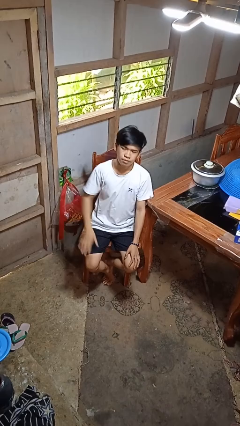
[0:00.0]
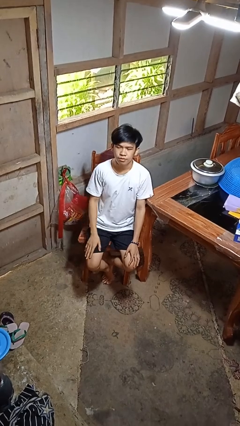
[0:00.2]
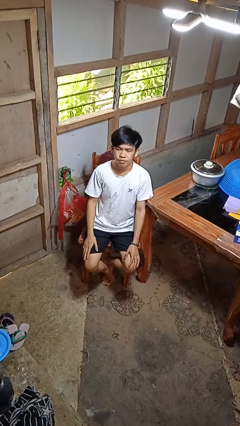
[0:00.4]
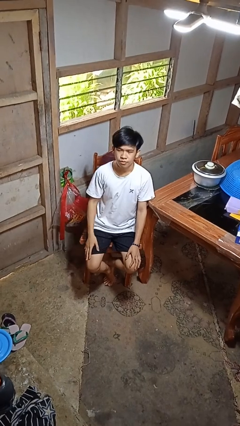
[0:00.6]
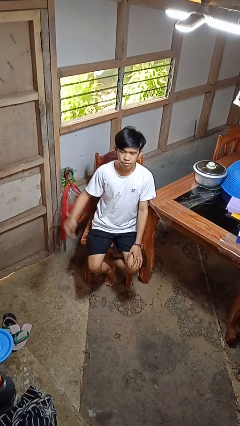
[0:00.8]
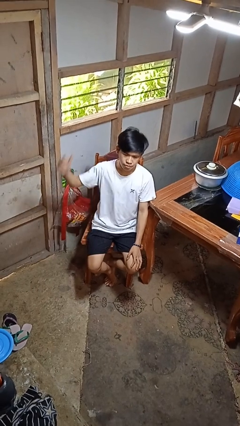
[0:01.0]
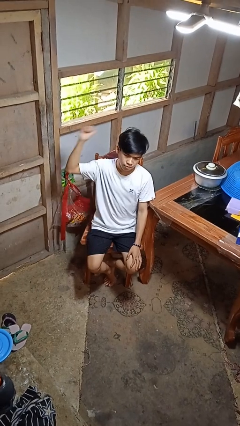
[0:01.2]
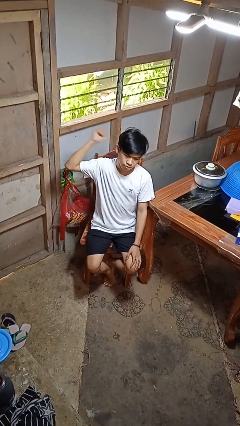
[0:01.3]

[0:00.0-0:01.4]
person gestures behind me

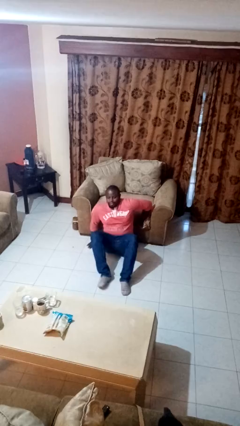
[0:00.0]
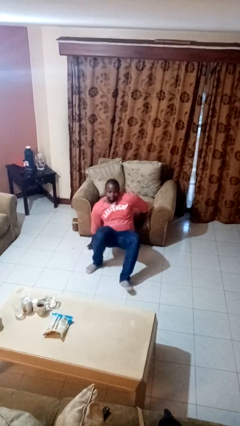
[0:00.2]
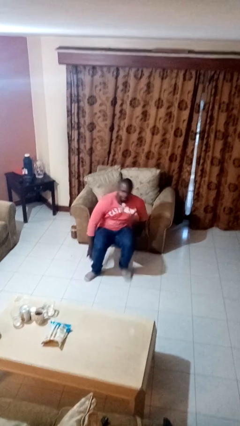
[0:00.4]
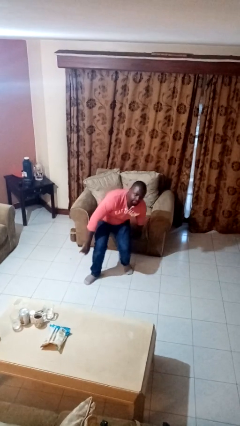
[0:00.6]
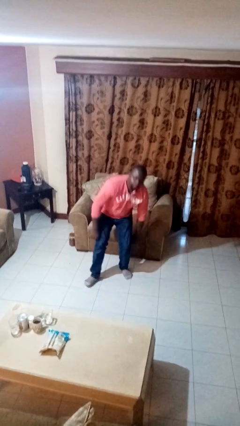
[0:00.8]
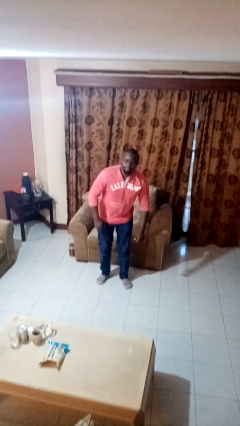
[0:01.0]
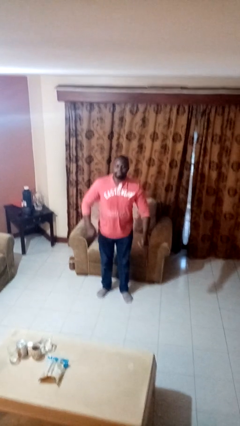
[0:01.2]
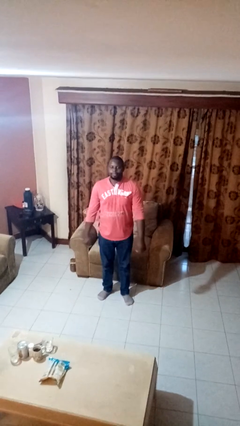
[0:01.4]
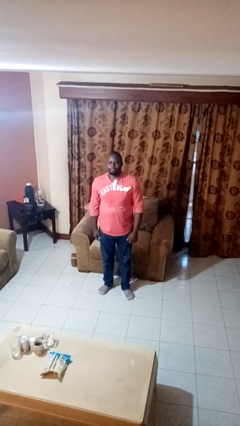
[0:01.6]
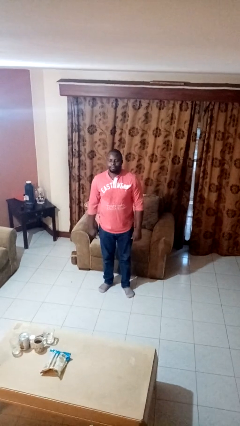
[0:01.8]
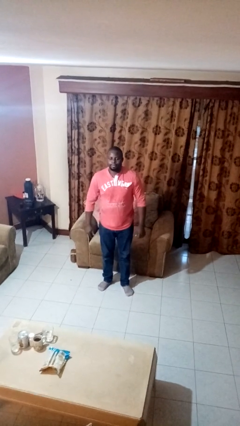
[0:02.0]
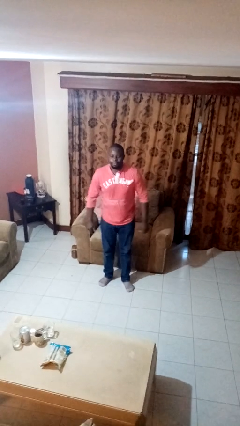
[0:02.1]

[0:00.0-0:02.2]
person stands up from floor

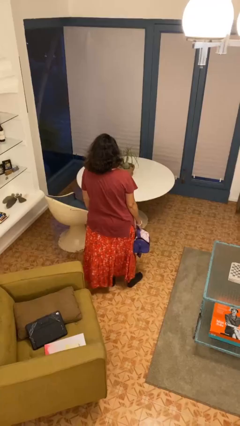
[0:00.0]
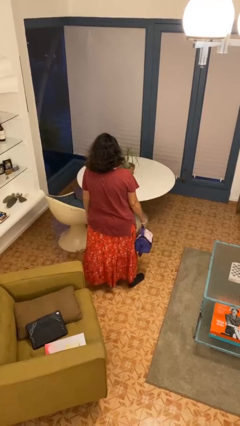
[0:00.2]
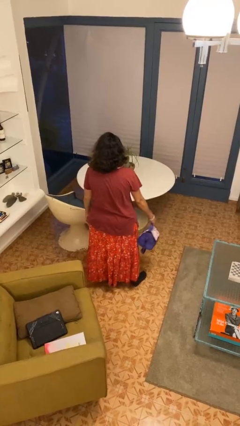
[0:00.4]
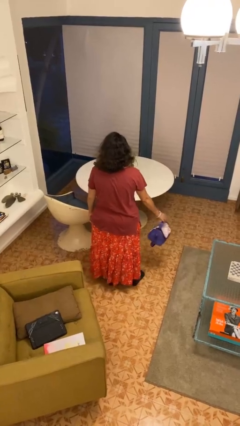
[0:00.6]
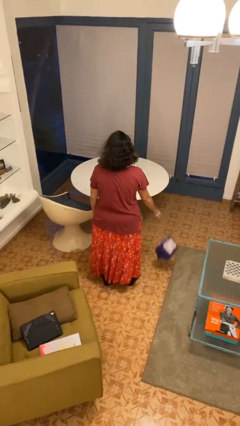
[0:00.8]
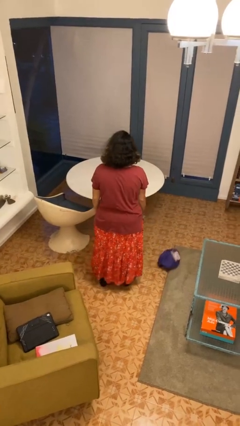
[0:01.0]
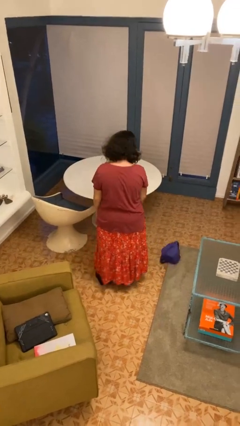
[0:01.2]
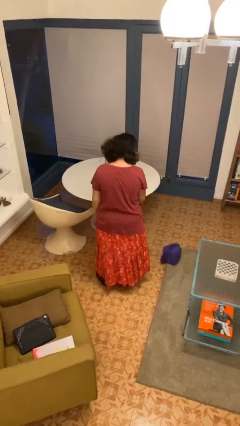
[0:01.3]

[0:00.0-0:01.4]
person drops object

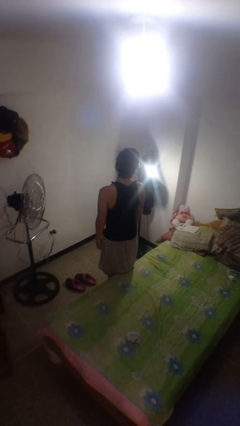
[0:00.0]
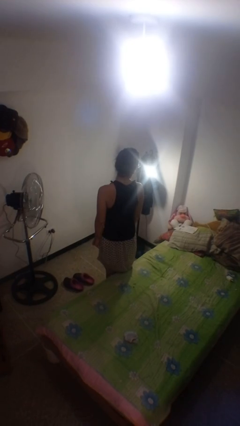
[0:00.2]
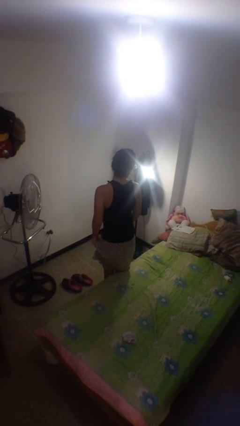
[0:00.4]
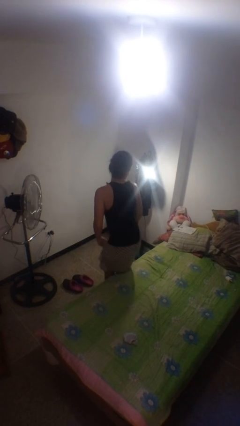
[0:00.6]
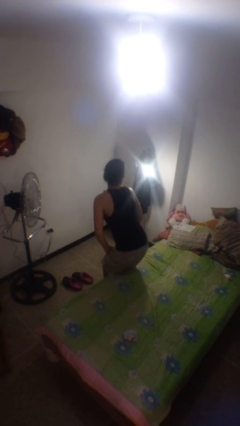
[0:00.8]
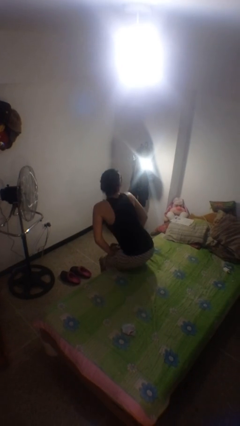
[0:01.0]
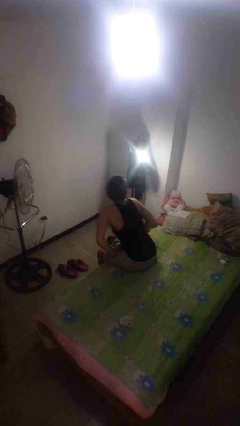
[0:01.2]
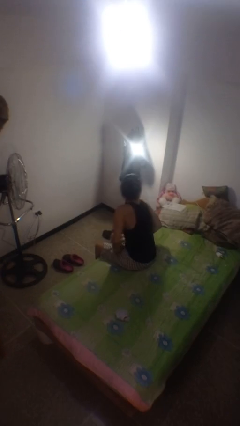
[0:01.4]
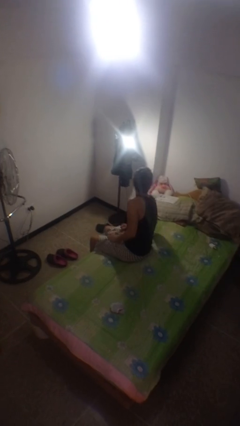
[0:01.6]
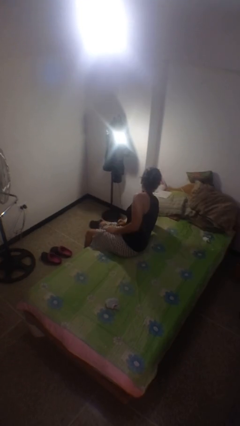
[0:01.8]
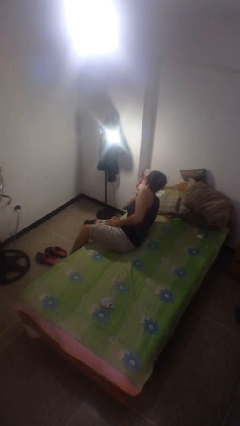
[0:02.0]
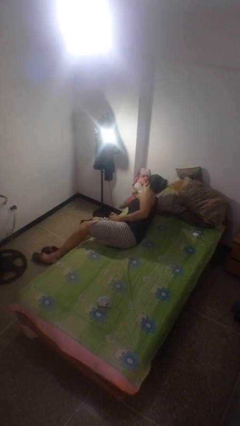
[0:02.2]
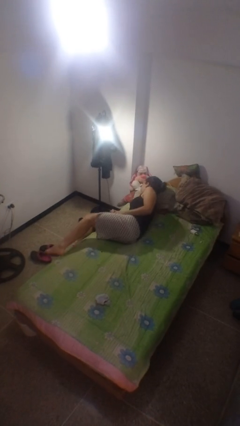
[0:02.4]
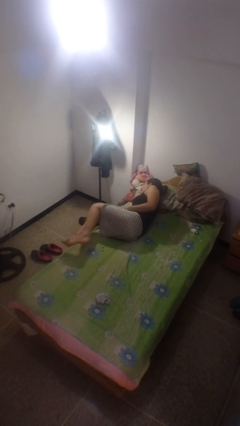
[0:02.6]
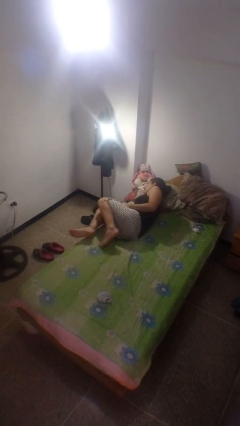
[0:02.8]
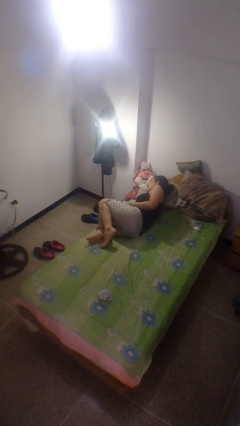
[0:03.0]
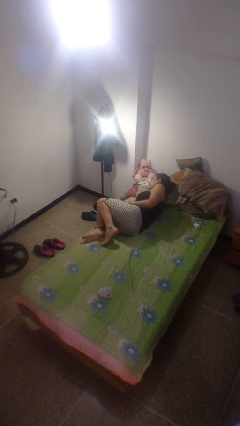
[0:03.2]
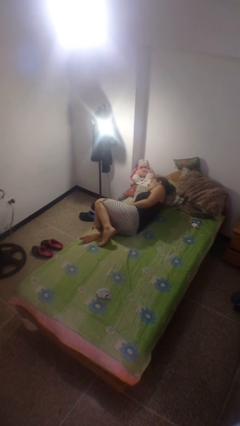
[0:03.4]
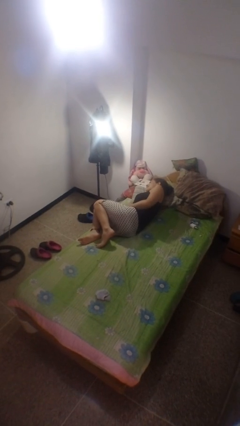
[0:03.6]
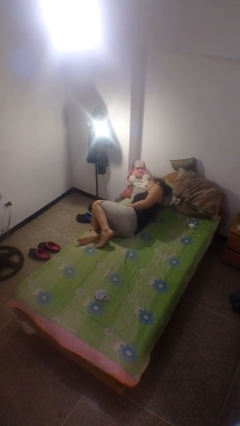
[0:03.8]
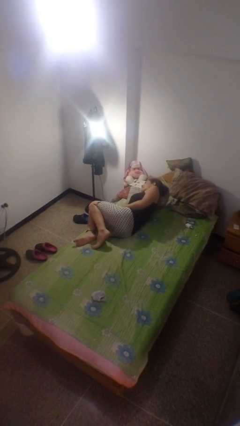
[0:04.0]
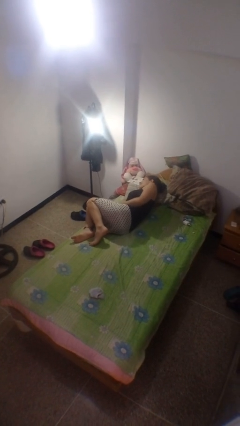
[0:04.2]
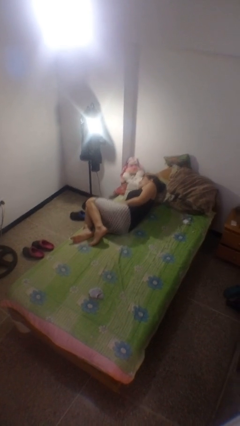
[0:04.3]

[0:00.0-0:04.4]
person lies down on bed

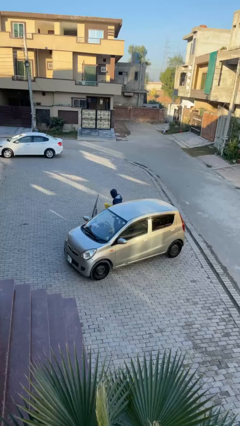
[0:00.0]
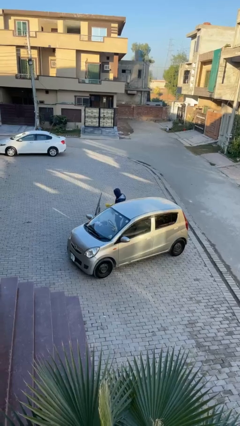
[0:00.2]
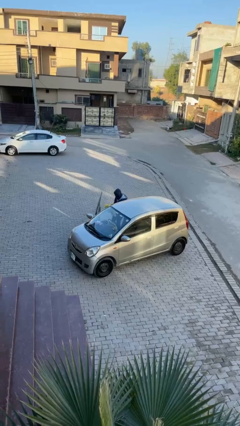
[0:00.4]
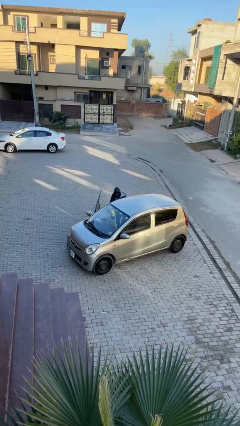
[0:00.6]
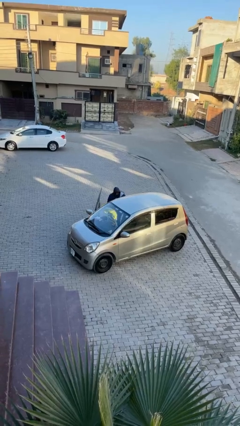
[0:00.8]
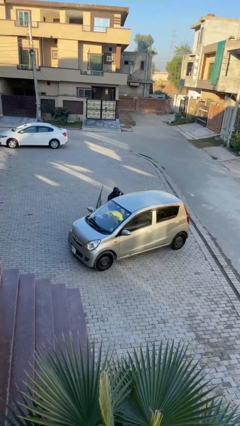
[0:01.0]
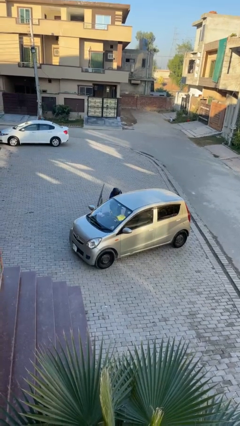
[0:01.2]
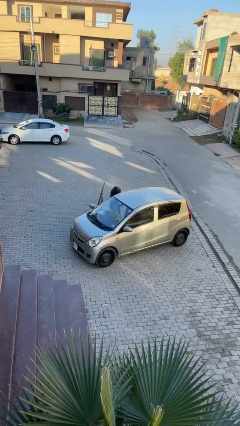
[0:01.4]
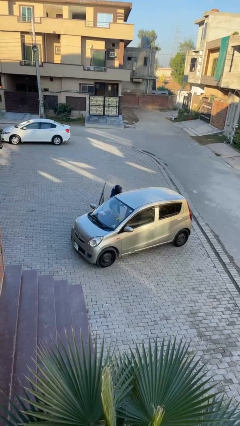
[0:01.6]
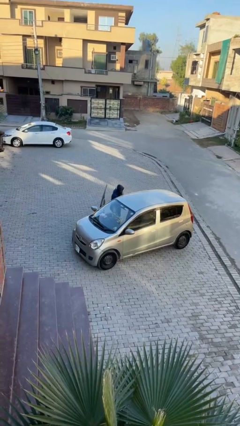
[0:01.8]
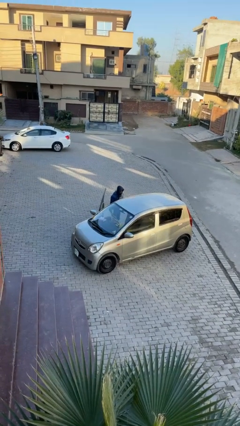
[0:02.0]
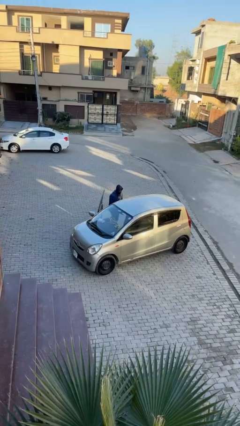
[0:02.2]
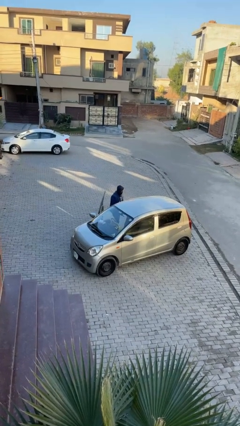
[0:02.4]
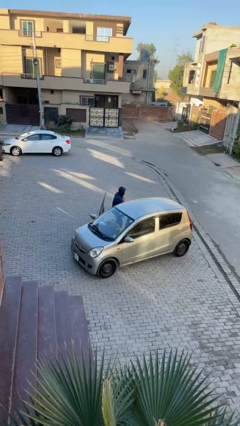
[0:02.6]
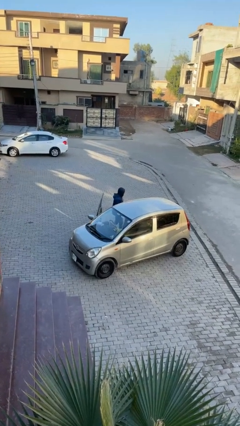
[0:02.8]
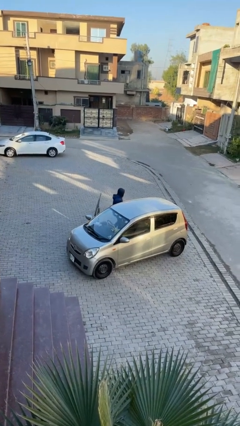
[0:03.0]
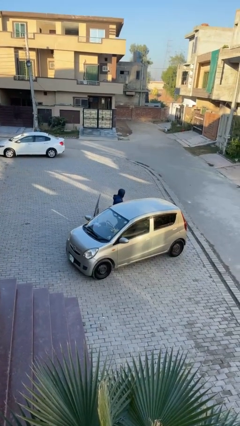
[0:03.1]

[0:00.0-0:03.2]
person loads car

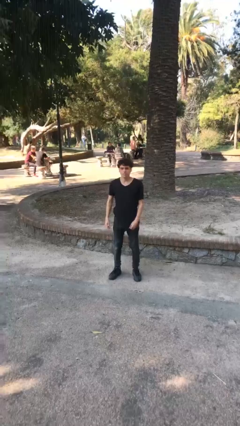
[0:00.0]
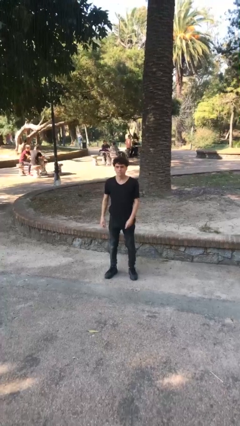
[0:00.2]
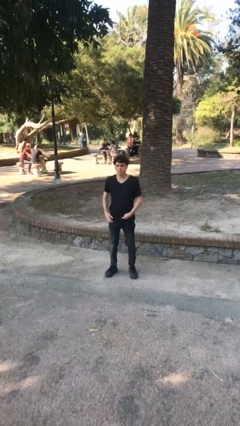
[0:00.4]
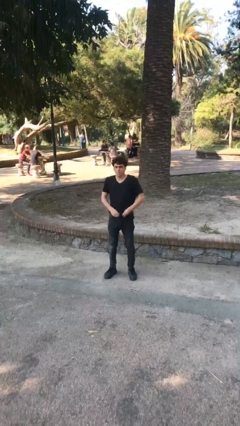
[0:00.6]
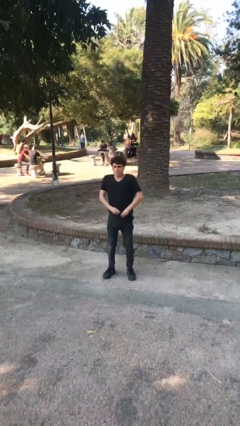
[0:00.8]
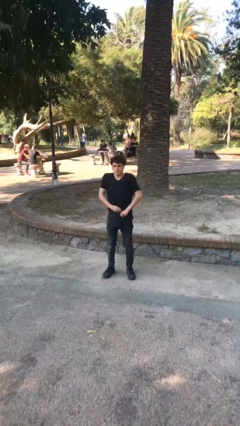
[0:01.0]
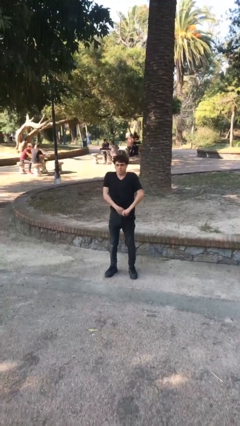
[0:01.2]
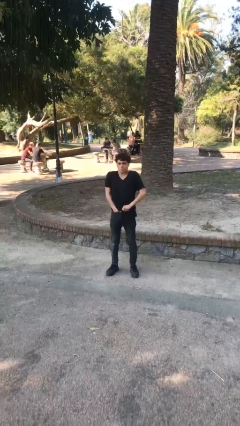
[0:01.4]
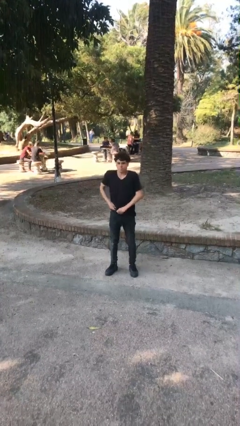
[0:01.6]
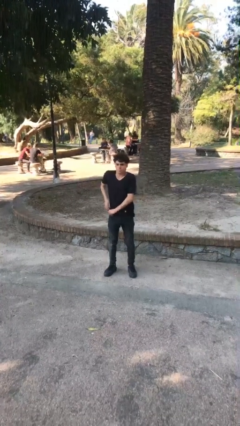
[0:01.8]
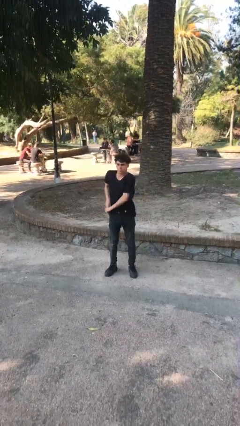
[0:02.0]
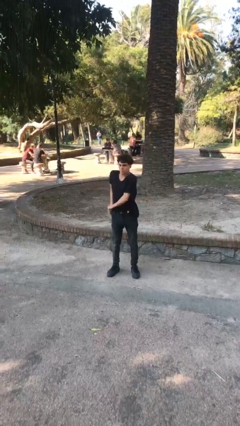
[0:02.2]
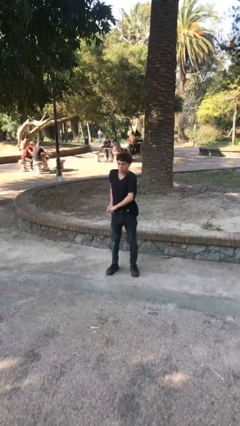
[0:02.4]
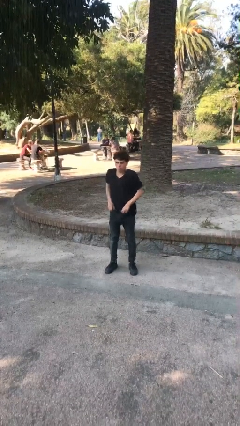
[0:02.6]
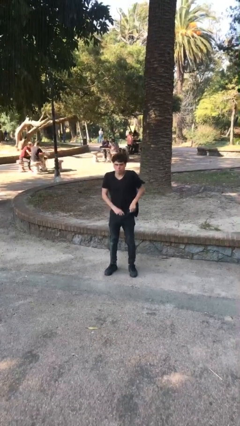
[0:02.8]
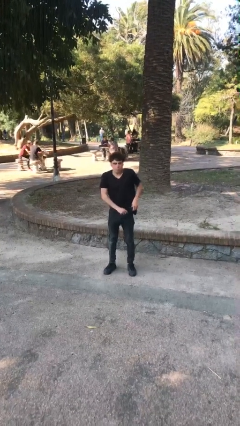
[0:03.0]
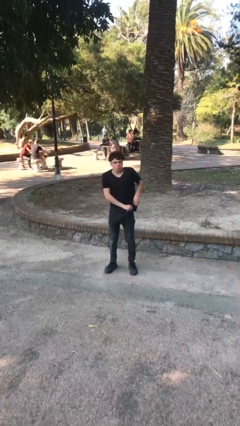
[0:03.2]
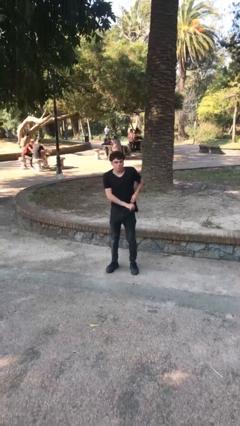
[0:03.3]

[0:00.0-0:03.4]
person tucks in shirt

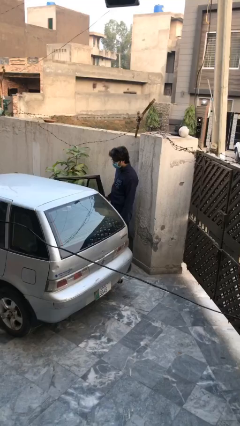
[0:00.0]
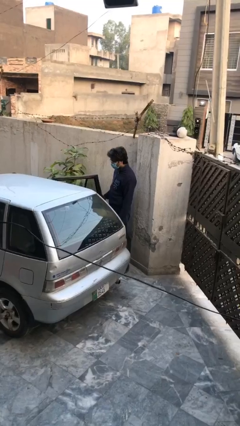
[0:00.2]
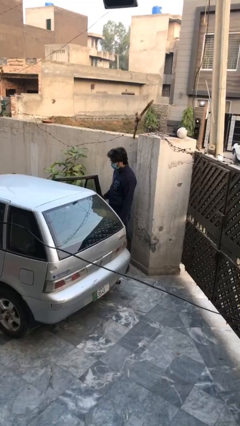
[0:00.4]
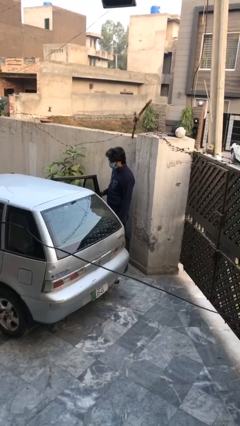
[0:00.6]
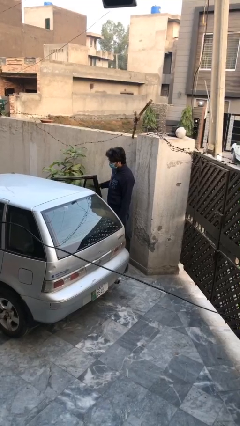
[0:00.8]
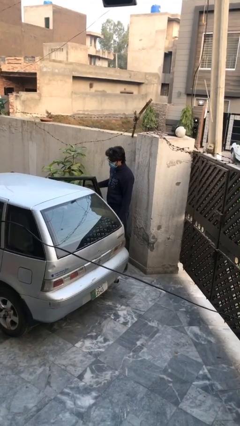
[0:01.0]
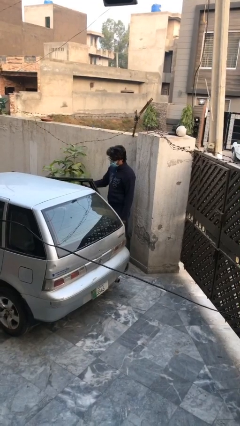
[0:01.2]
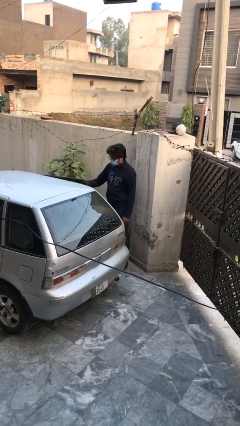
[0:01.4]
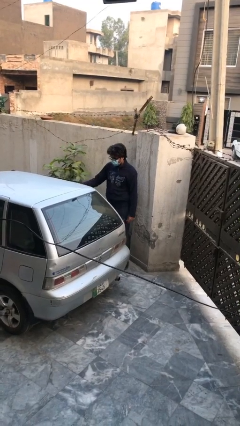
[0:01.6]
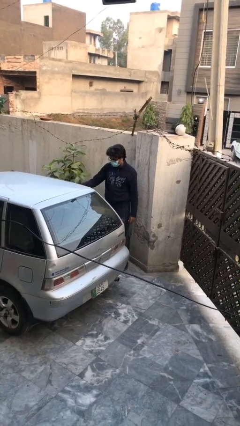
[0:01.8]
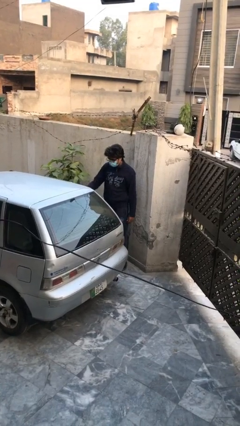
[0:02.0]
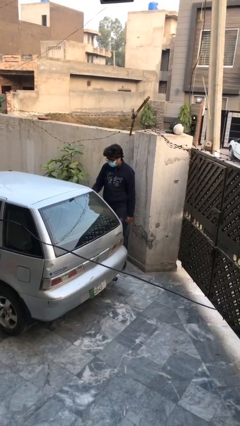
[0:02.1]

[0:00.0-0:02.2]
person closes car door
